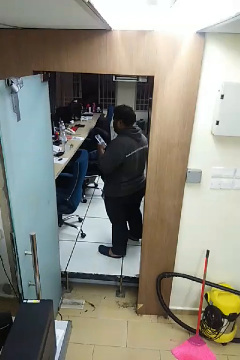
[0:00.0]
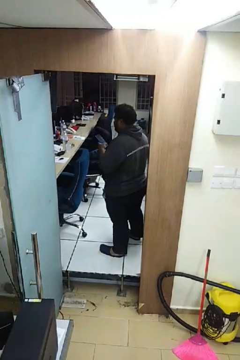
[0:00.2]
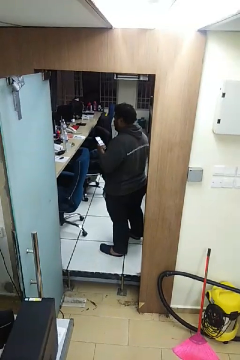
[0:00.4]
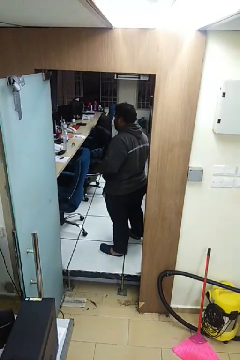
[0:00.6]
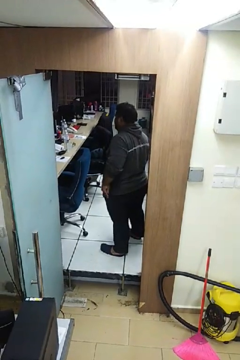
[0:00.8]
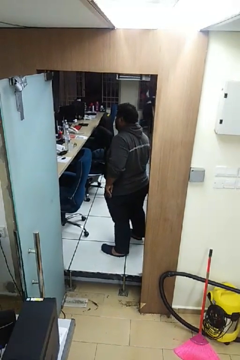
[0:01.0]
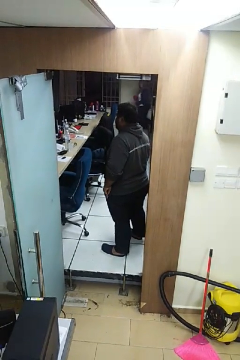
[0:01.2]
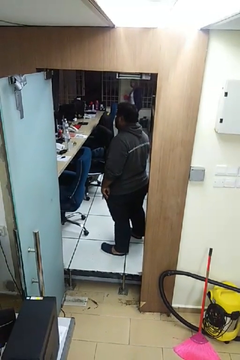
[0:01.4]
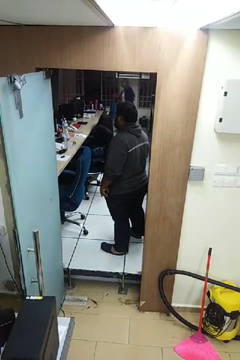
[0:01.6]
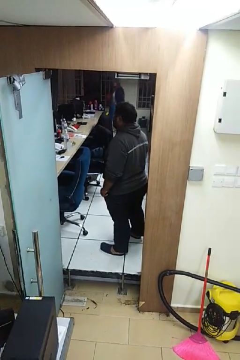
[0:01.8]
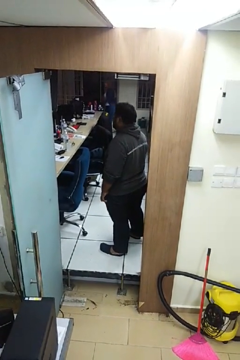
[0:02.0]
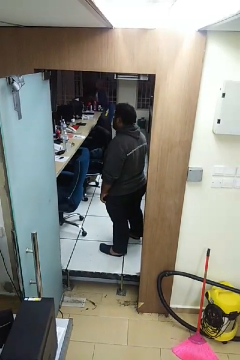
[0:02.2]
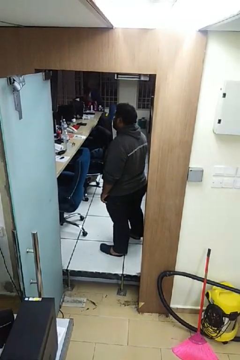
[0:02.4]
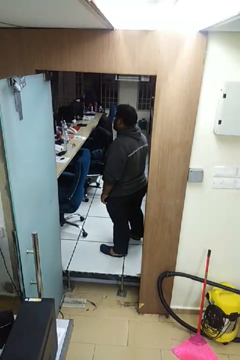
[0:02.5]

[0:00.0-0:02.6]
person puts phone into pocket

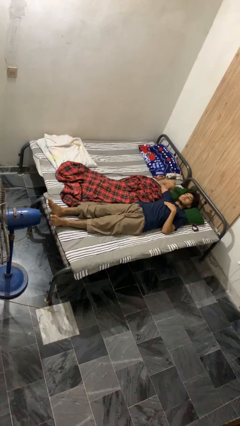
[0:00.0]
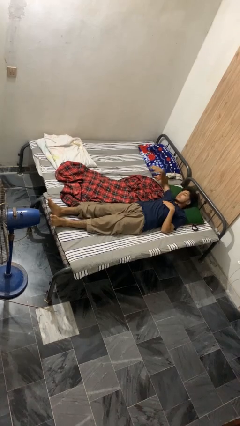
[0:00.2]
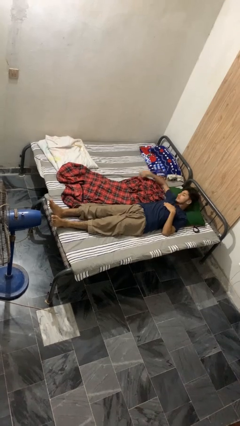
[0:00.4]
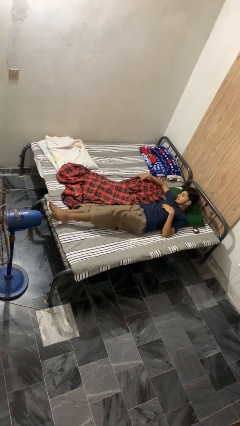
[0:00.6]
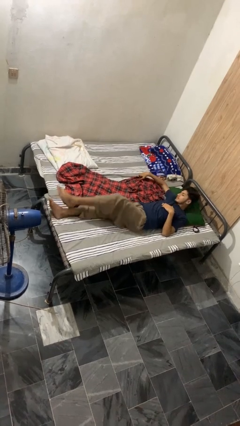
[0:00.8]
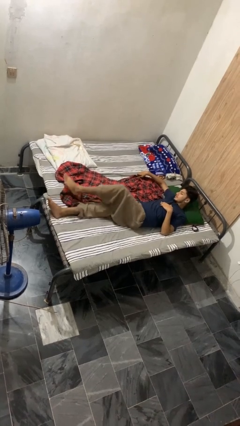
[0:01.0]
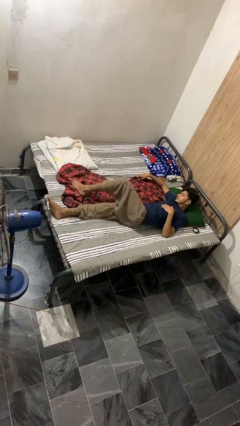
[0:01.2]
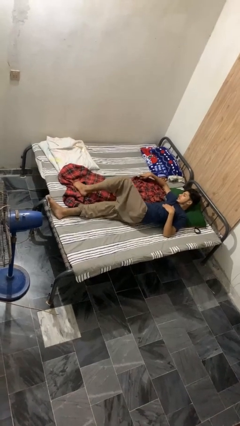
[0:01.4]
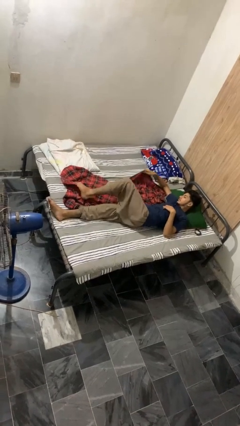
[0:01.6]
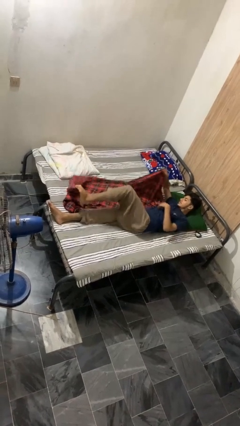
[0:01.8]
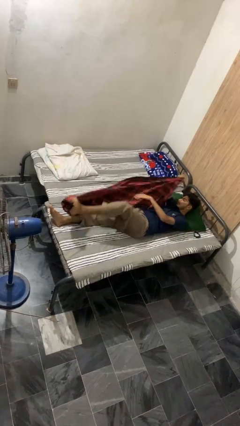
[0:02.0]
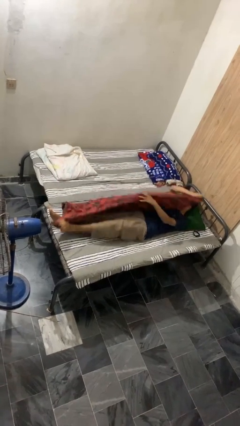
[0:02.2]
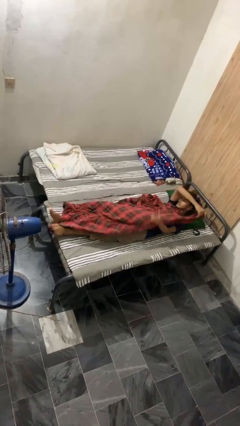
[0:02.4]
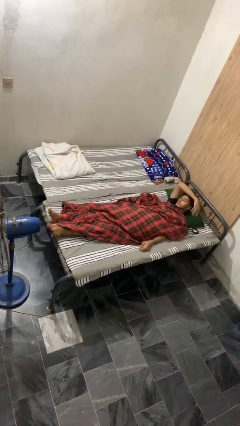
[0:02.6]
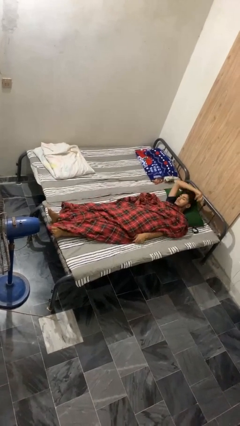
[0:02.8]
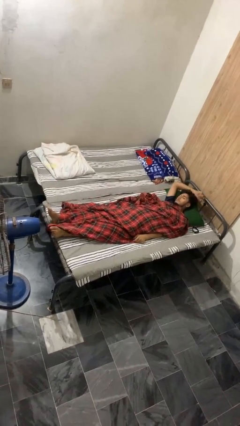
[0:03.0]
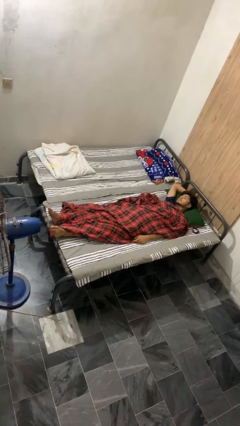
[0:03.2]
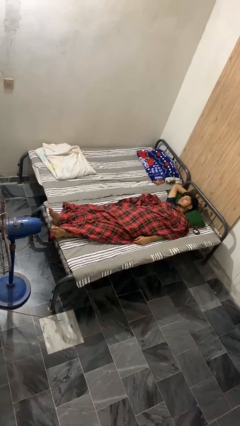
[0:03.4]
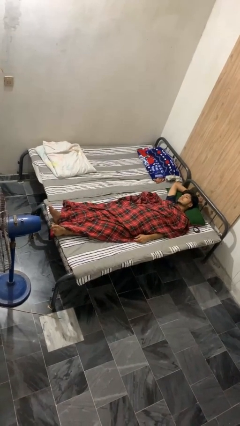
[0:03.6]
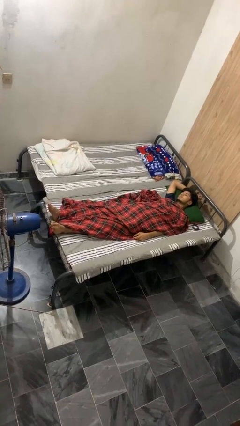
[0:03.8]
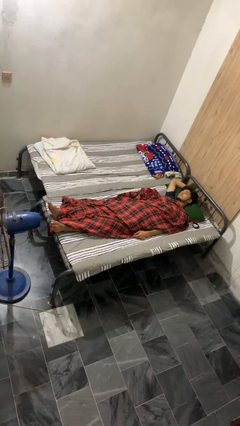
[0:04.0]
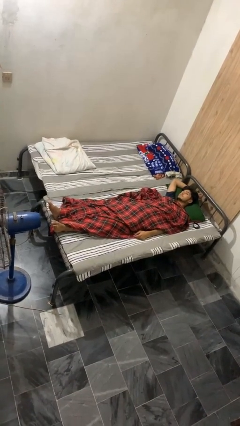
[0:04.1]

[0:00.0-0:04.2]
person covers with bedsheets

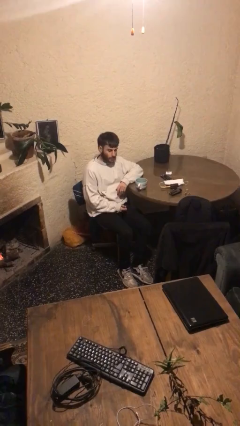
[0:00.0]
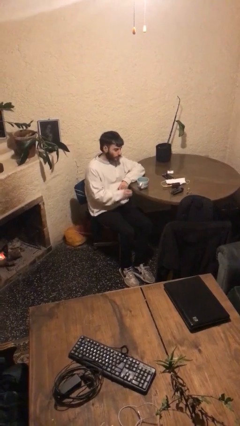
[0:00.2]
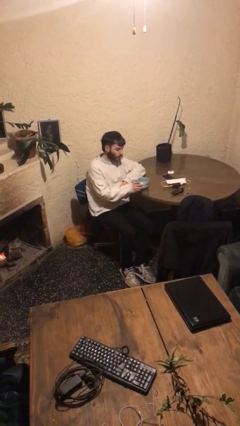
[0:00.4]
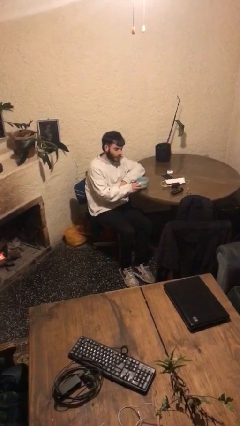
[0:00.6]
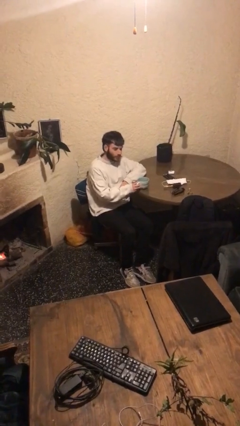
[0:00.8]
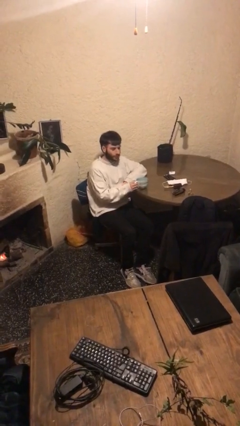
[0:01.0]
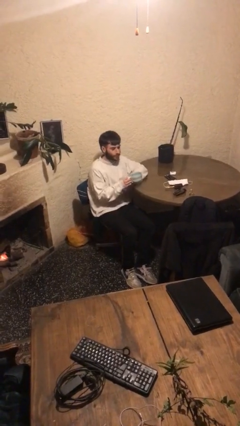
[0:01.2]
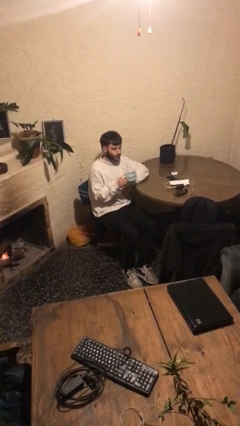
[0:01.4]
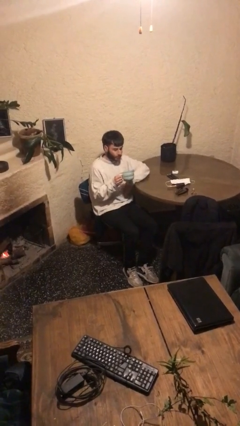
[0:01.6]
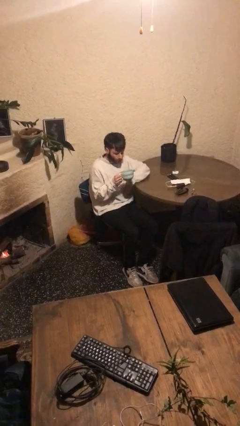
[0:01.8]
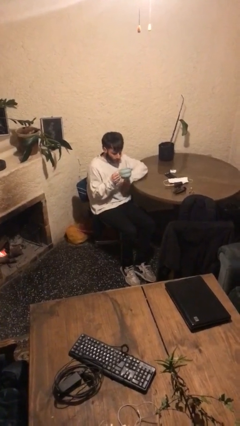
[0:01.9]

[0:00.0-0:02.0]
person picks up object from table

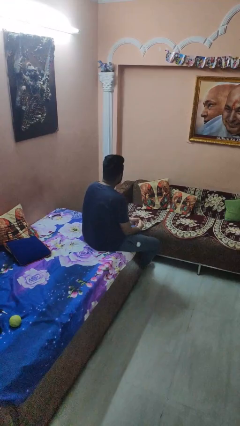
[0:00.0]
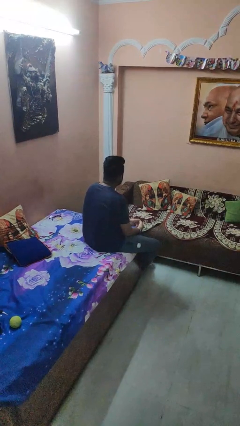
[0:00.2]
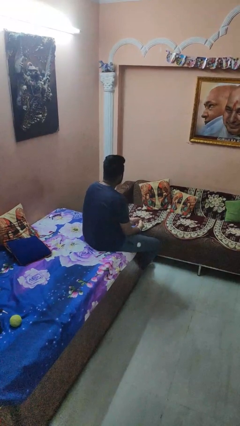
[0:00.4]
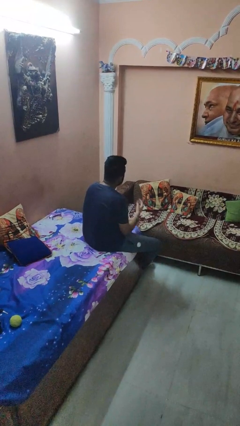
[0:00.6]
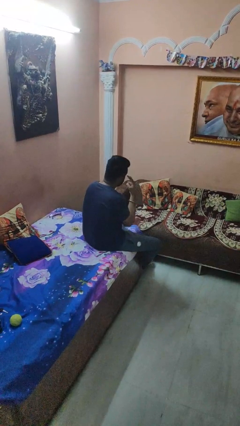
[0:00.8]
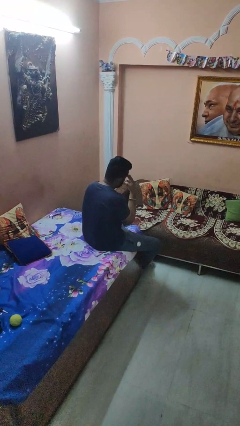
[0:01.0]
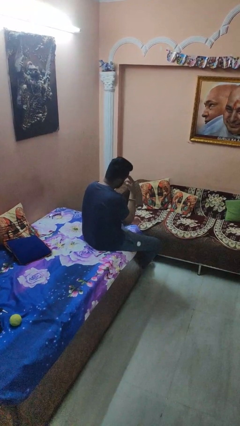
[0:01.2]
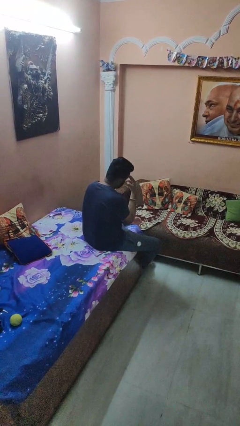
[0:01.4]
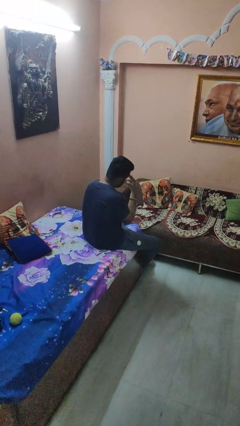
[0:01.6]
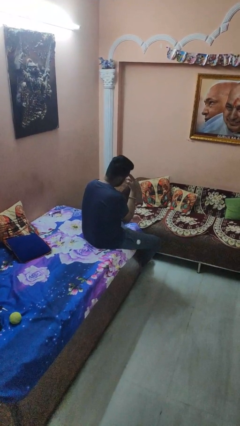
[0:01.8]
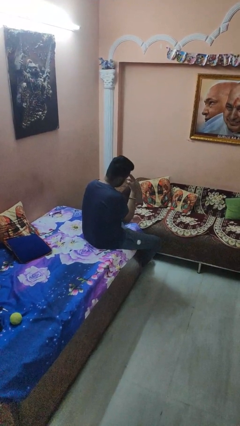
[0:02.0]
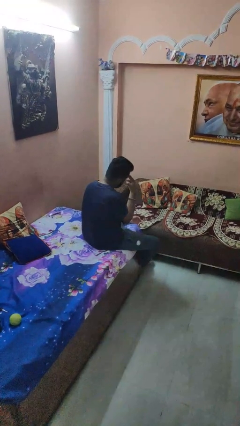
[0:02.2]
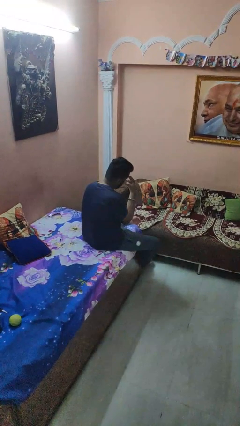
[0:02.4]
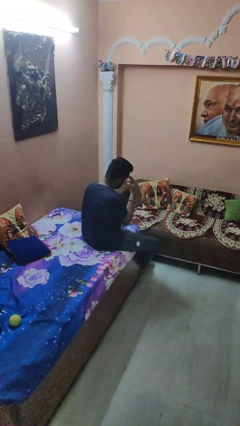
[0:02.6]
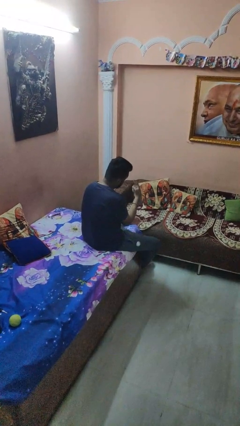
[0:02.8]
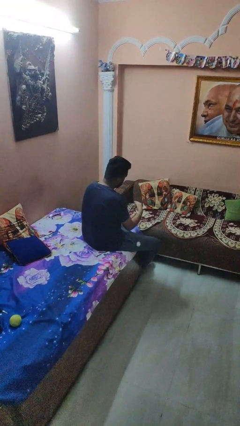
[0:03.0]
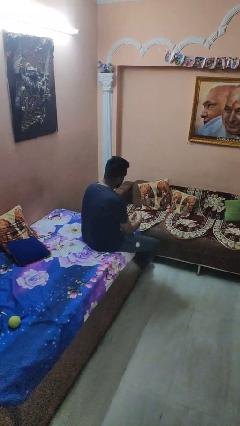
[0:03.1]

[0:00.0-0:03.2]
person gestures watch closely

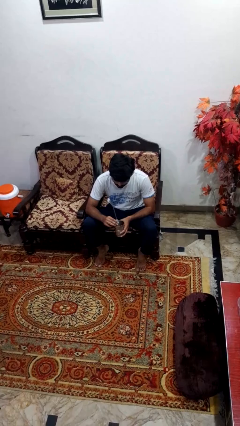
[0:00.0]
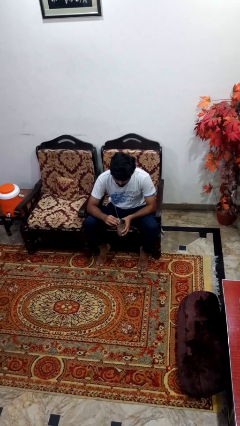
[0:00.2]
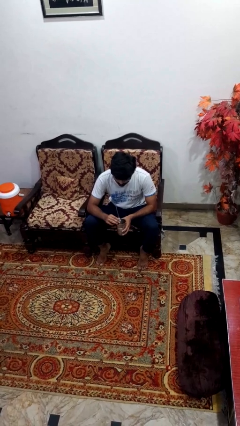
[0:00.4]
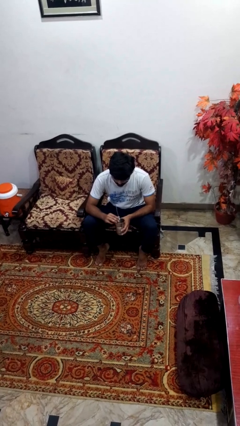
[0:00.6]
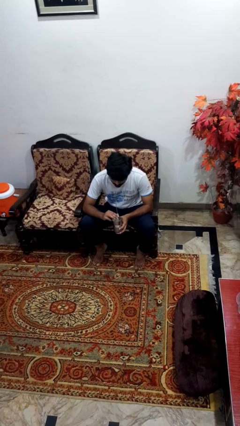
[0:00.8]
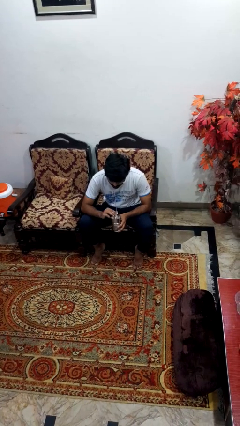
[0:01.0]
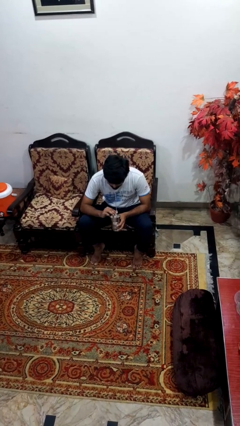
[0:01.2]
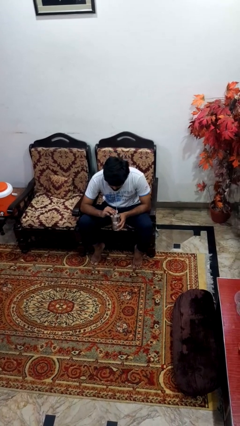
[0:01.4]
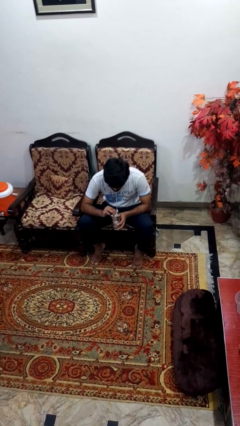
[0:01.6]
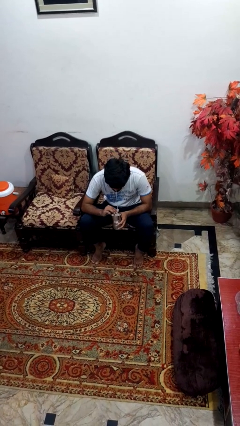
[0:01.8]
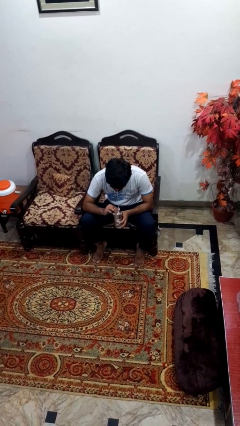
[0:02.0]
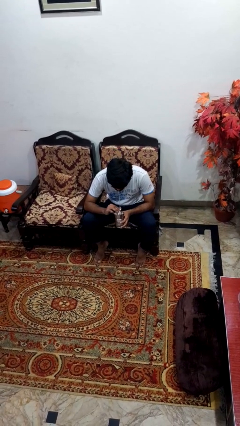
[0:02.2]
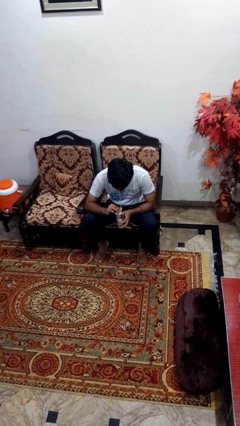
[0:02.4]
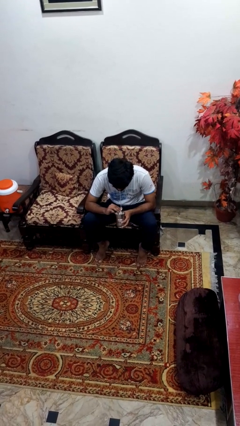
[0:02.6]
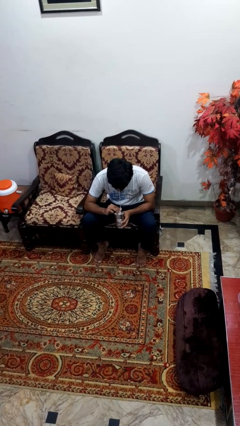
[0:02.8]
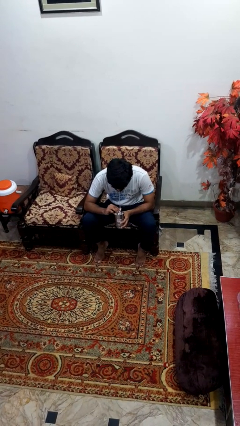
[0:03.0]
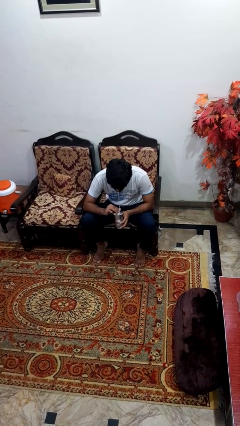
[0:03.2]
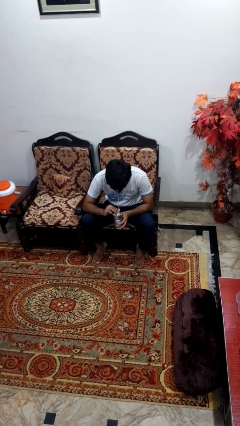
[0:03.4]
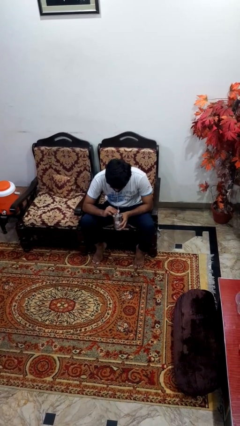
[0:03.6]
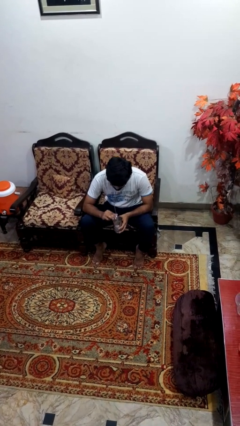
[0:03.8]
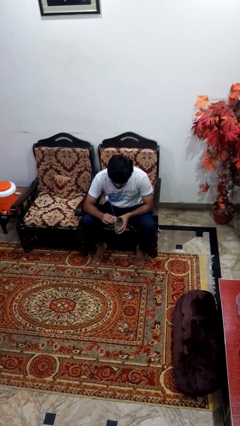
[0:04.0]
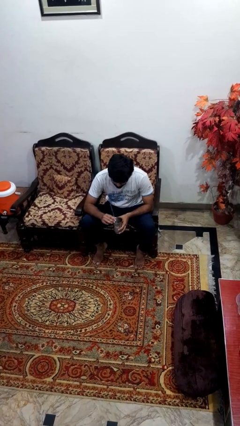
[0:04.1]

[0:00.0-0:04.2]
person drinks from straw

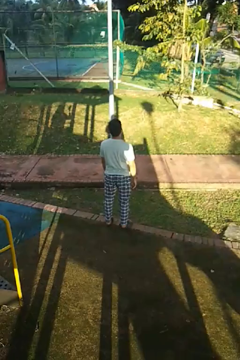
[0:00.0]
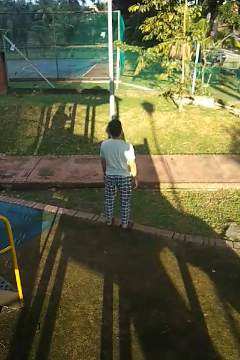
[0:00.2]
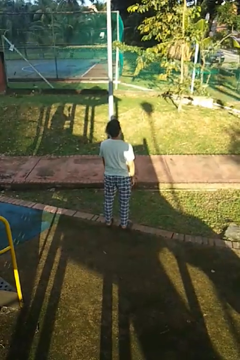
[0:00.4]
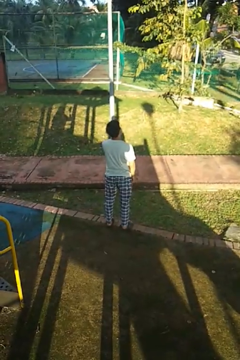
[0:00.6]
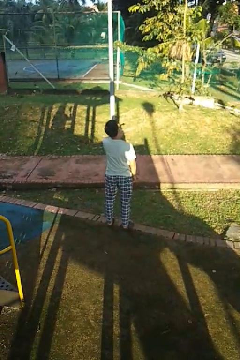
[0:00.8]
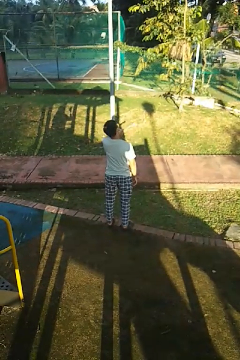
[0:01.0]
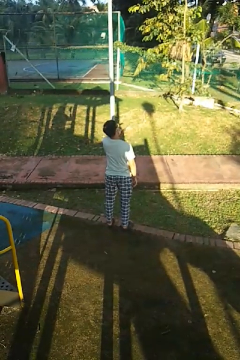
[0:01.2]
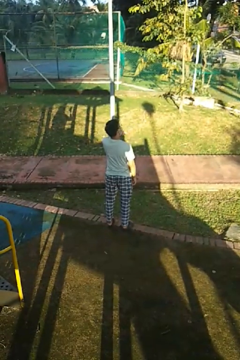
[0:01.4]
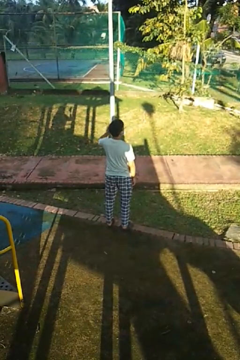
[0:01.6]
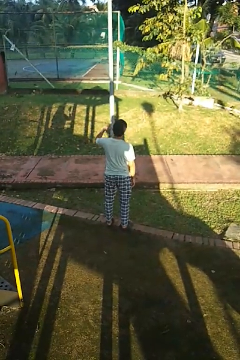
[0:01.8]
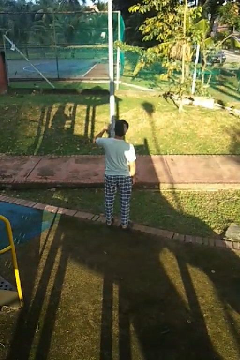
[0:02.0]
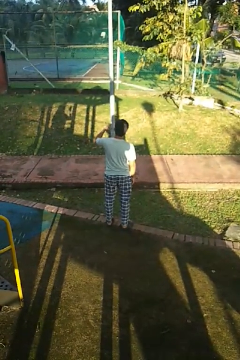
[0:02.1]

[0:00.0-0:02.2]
person gestures cut
